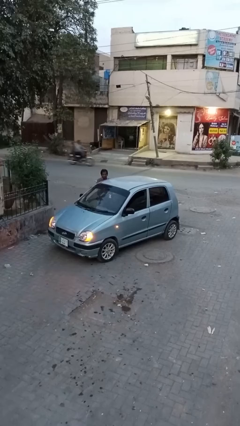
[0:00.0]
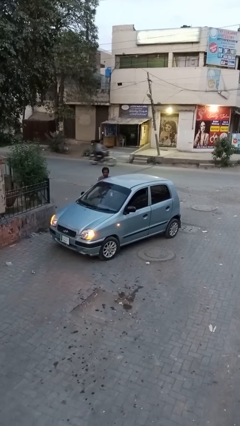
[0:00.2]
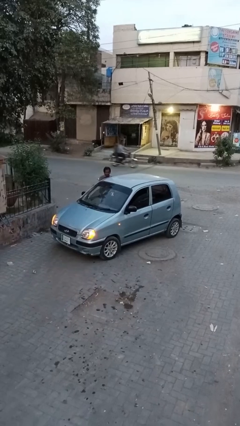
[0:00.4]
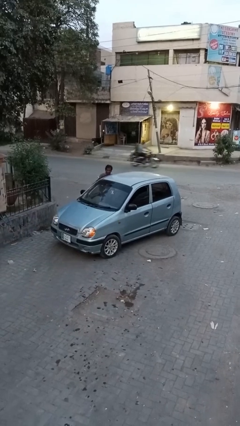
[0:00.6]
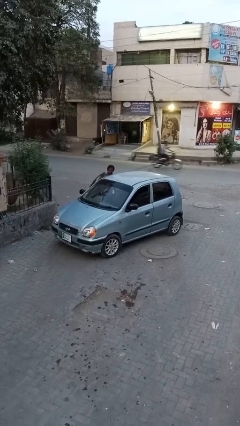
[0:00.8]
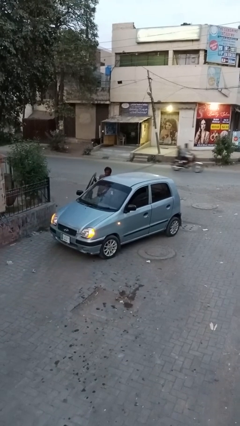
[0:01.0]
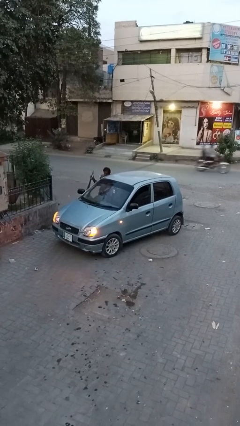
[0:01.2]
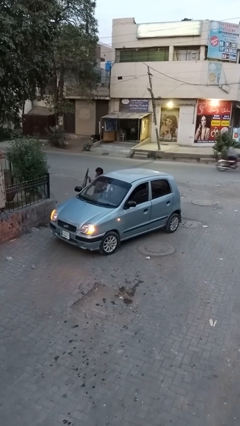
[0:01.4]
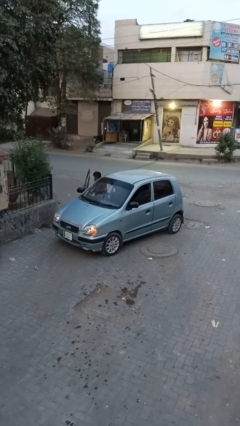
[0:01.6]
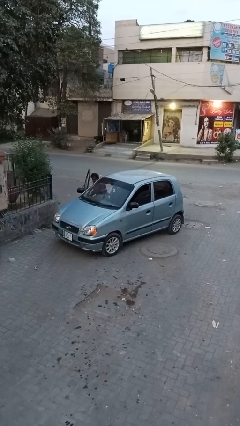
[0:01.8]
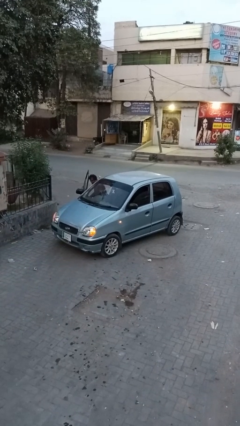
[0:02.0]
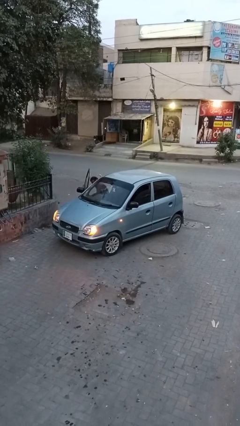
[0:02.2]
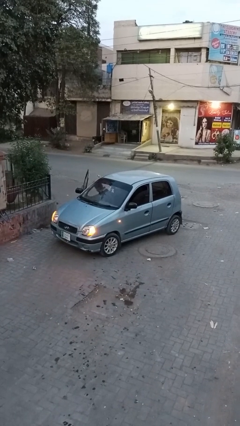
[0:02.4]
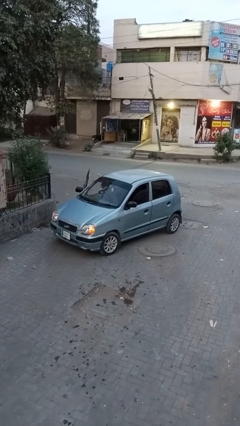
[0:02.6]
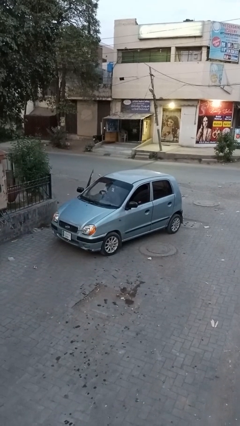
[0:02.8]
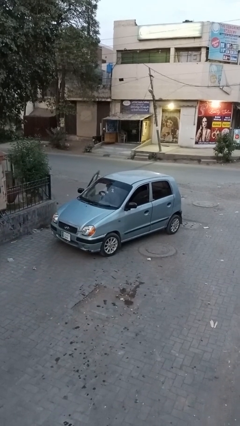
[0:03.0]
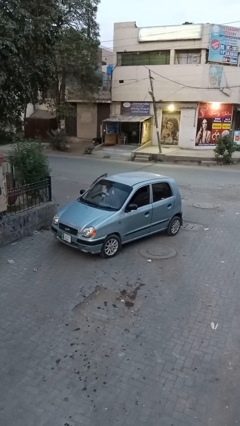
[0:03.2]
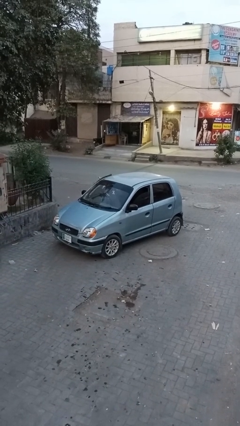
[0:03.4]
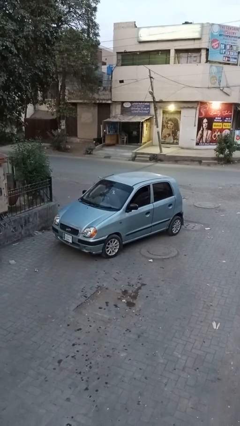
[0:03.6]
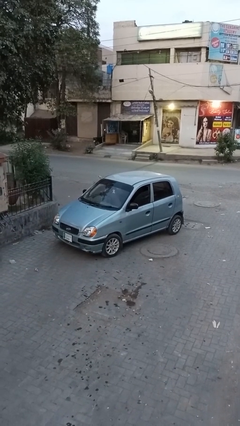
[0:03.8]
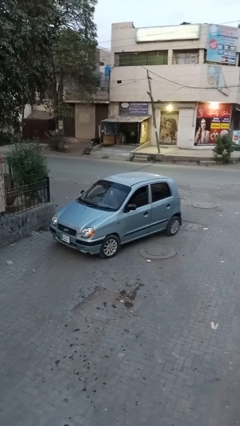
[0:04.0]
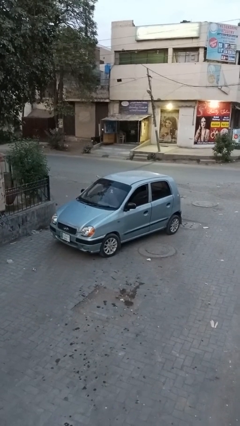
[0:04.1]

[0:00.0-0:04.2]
car picks up person

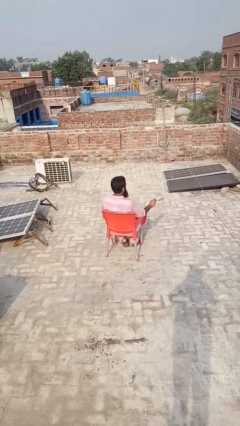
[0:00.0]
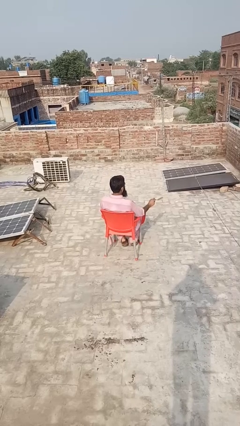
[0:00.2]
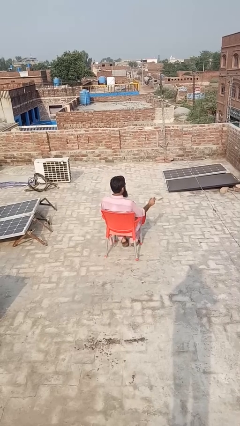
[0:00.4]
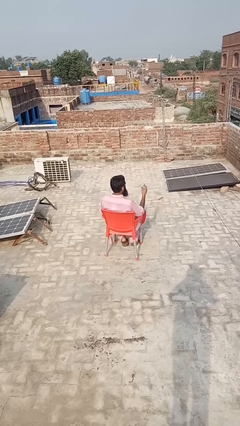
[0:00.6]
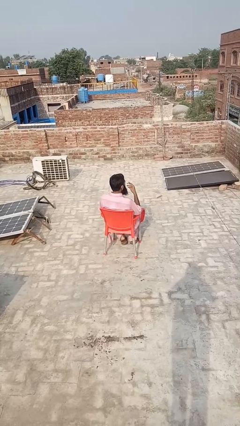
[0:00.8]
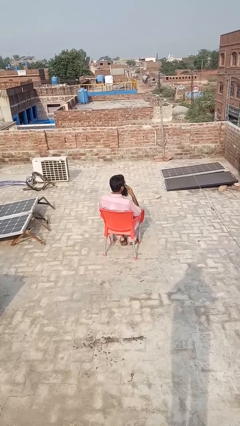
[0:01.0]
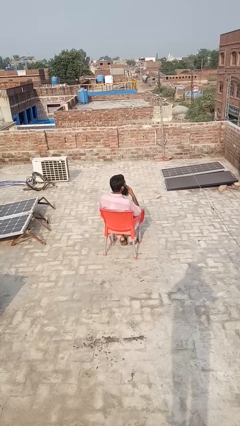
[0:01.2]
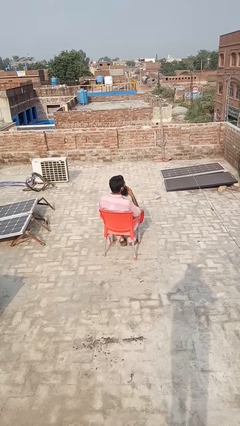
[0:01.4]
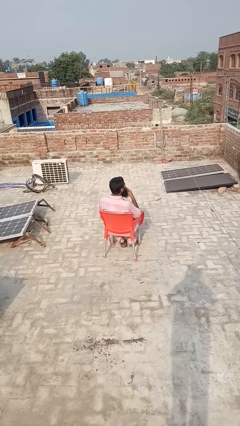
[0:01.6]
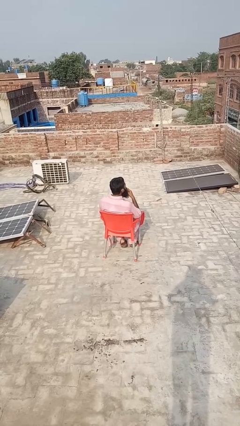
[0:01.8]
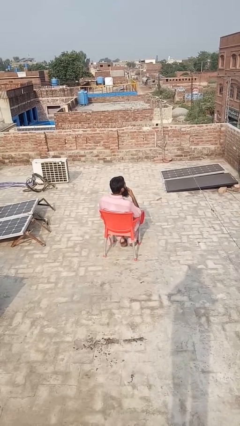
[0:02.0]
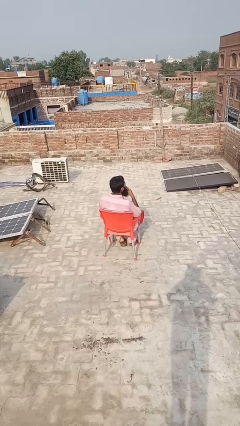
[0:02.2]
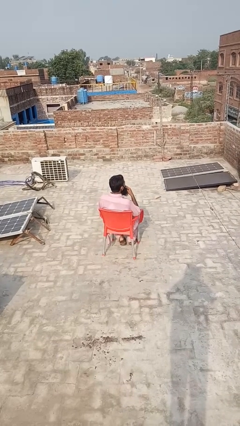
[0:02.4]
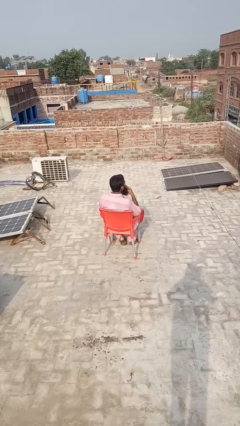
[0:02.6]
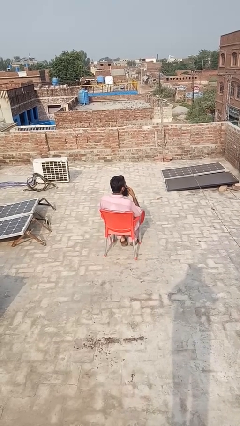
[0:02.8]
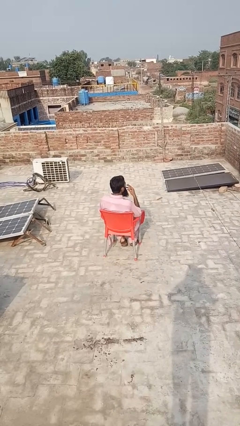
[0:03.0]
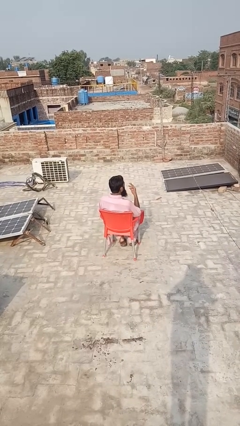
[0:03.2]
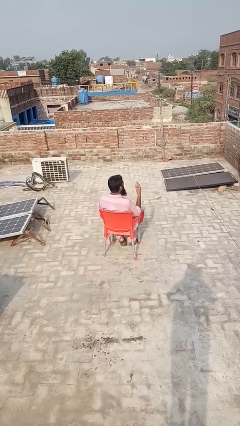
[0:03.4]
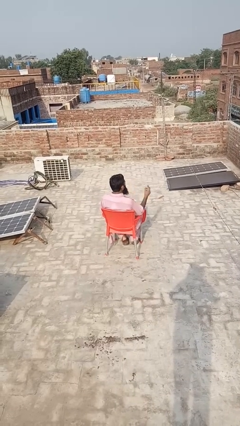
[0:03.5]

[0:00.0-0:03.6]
person vapes

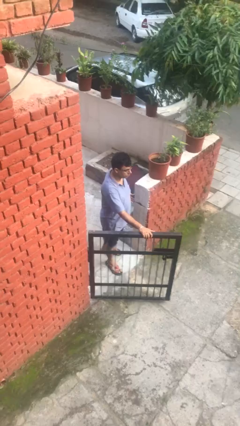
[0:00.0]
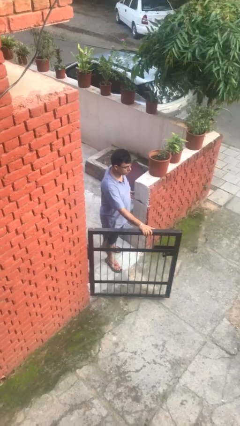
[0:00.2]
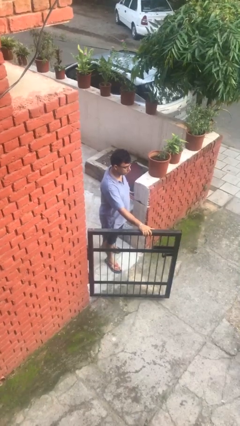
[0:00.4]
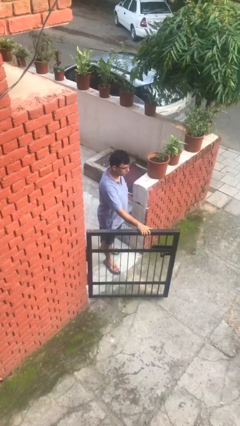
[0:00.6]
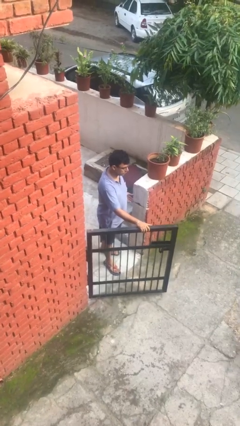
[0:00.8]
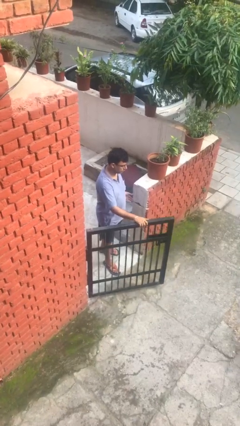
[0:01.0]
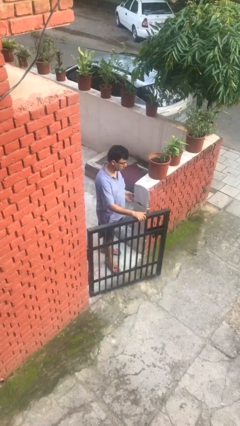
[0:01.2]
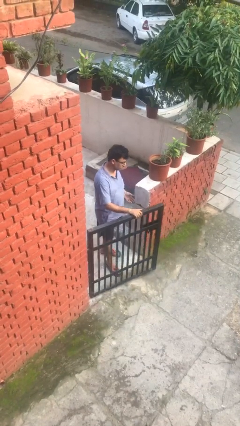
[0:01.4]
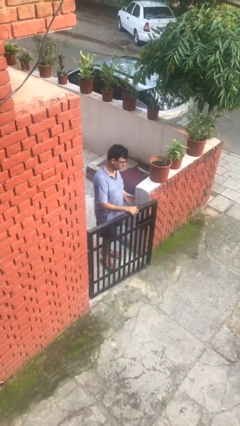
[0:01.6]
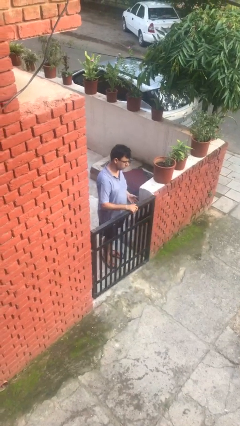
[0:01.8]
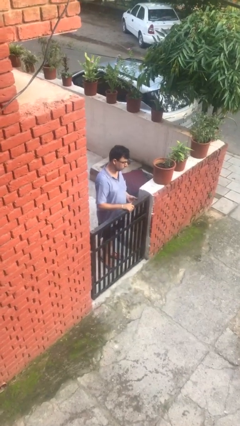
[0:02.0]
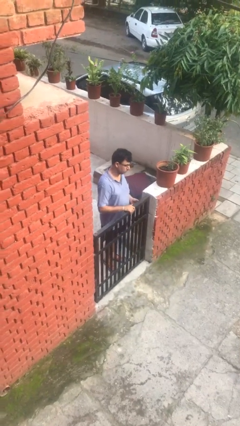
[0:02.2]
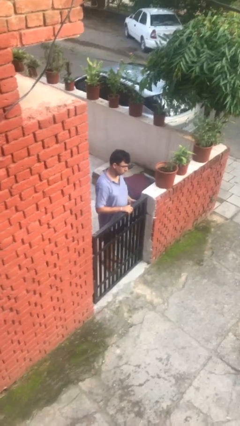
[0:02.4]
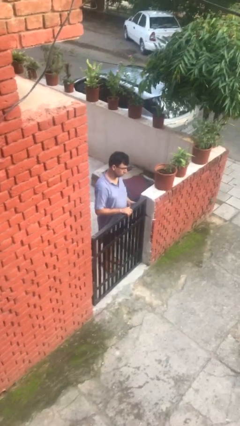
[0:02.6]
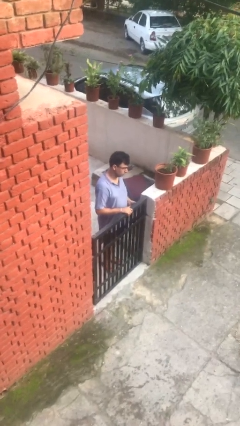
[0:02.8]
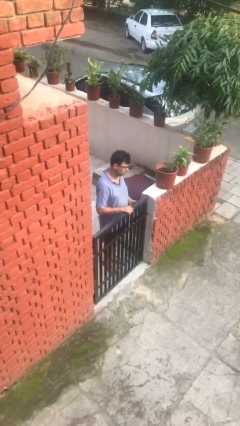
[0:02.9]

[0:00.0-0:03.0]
person closes gate

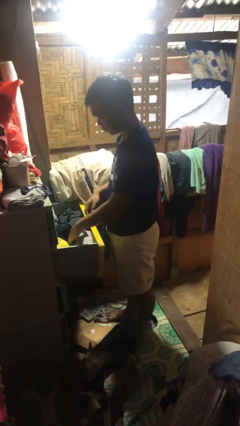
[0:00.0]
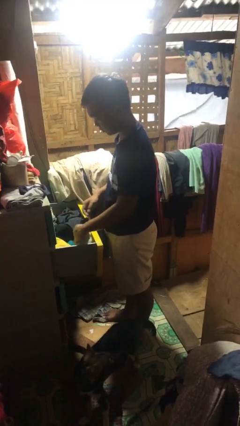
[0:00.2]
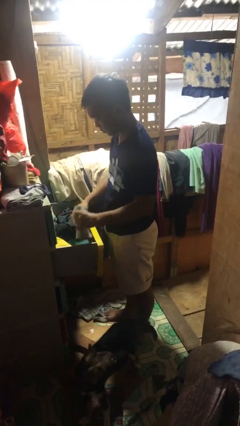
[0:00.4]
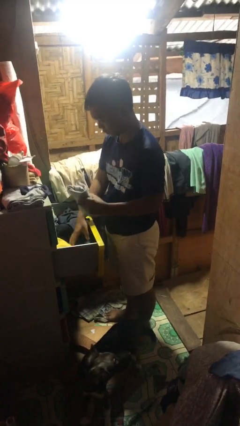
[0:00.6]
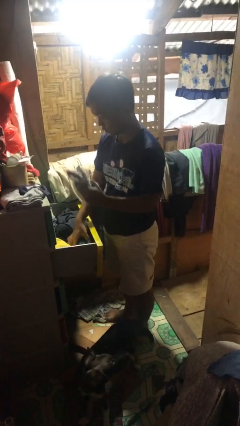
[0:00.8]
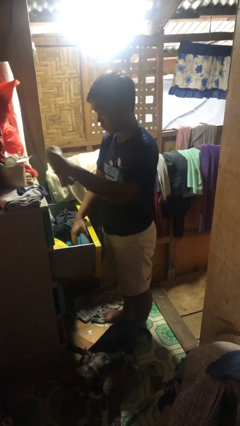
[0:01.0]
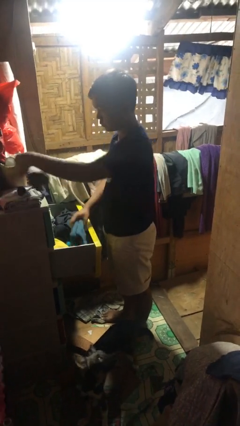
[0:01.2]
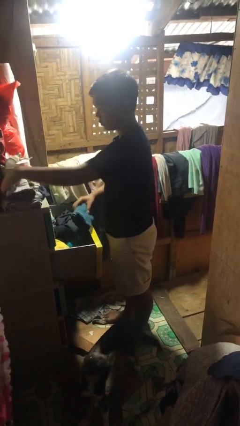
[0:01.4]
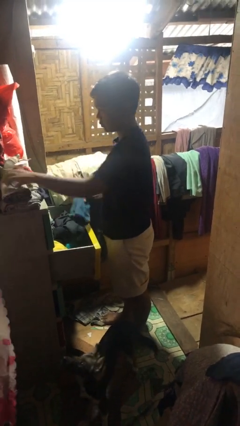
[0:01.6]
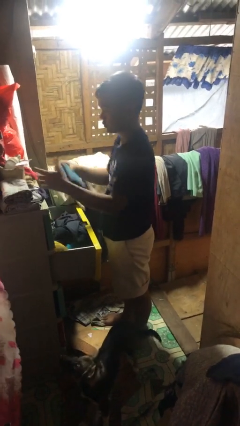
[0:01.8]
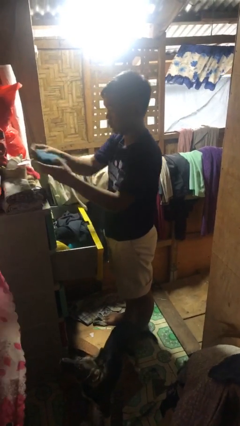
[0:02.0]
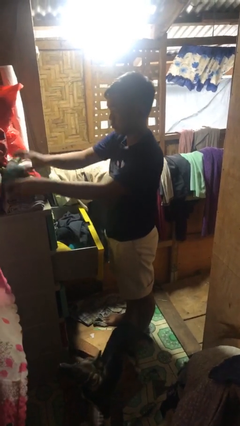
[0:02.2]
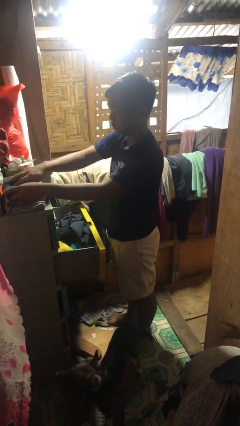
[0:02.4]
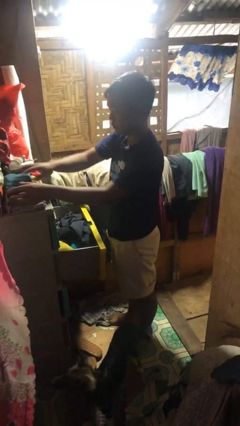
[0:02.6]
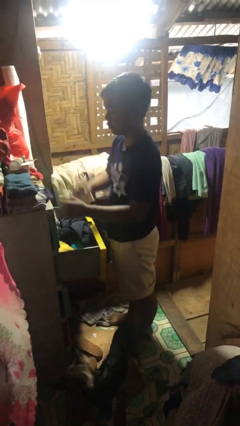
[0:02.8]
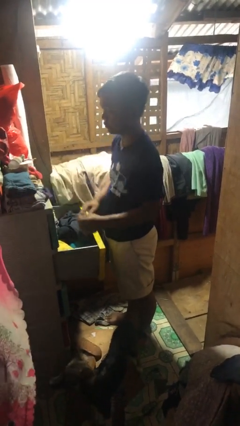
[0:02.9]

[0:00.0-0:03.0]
person takes clothes from dresser

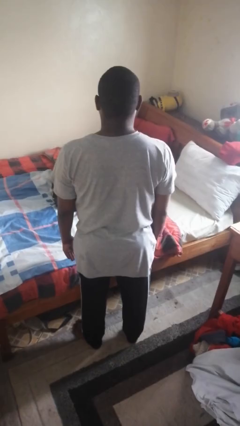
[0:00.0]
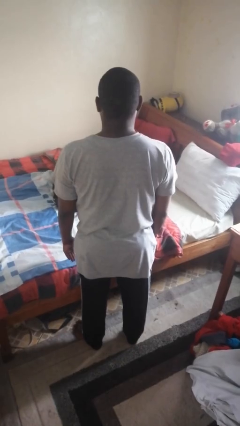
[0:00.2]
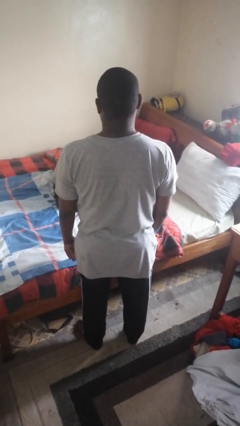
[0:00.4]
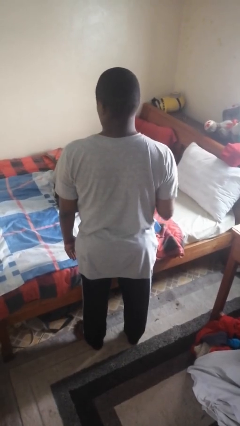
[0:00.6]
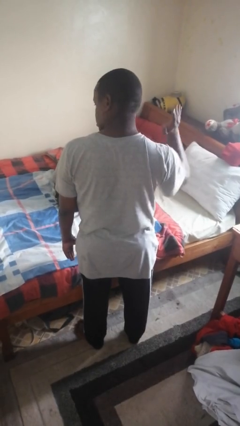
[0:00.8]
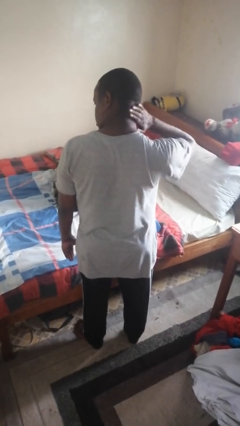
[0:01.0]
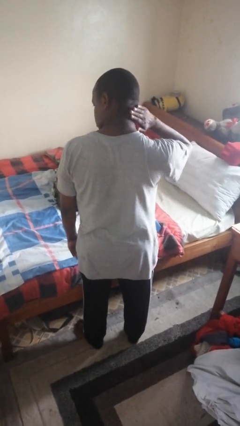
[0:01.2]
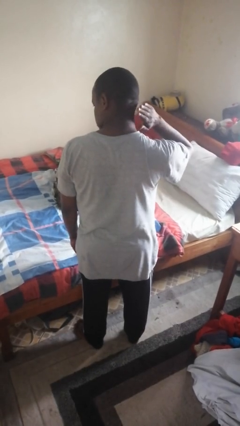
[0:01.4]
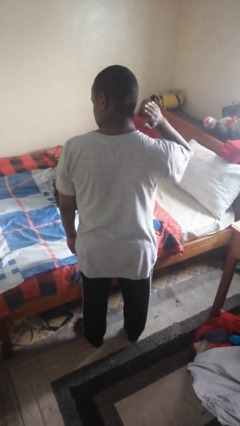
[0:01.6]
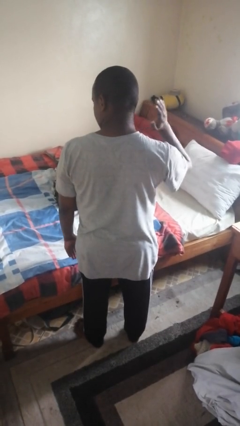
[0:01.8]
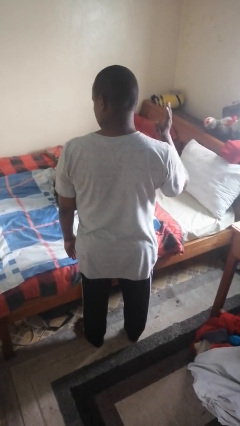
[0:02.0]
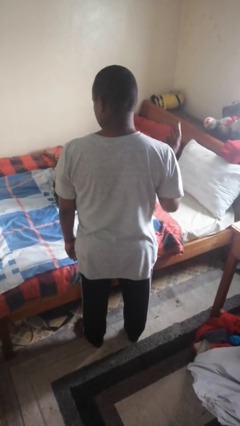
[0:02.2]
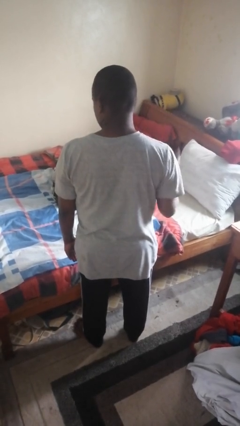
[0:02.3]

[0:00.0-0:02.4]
person swats bug

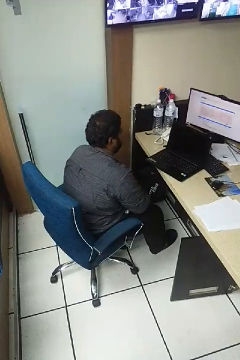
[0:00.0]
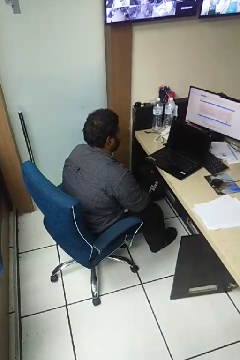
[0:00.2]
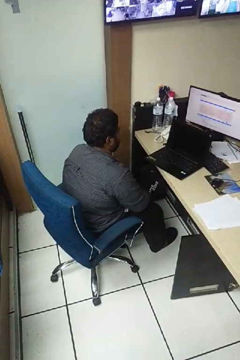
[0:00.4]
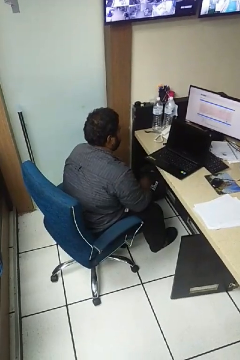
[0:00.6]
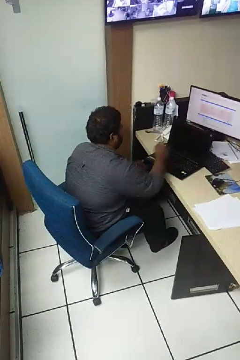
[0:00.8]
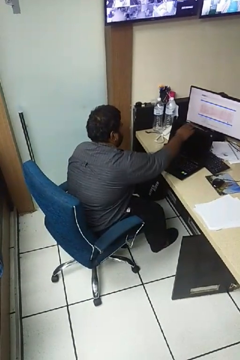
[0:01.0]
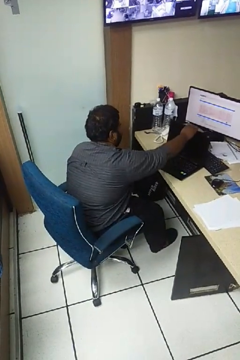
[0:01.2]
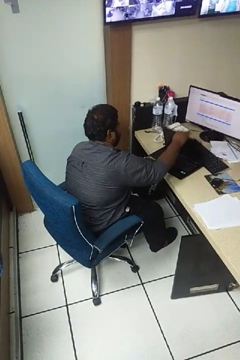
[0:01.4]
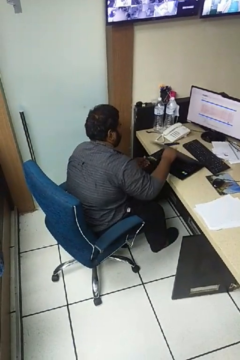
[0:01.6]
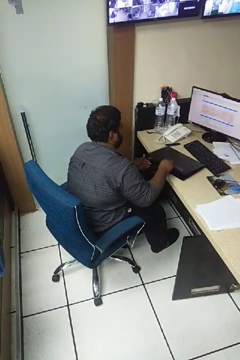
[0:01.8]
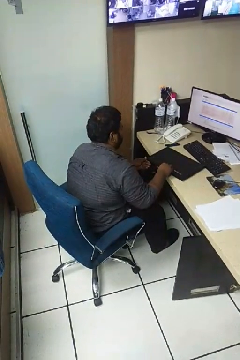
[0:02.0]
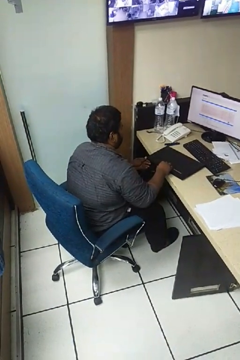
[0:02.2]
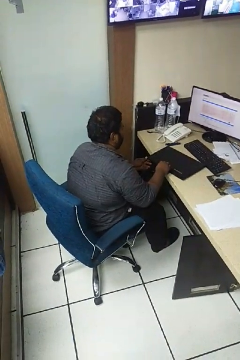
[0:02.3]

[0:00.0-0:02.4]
person closes laptop
